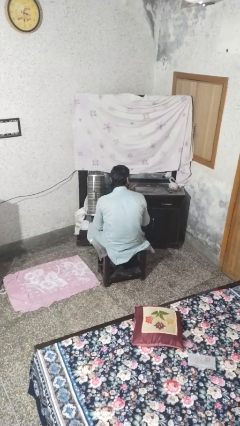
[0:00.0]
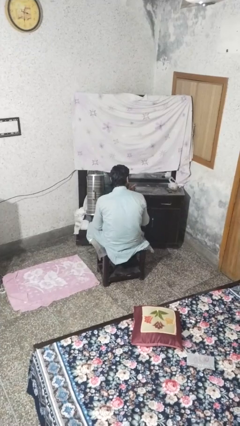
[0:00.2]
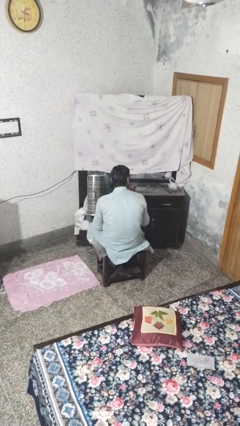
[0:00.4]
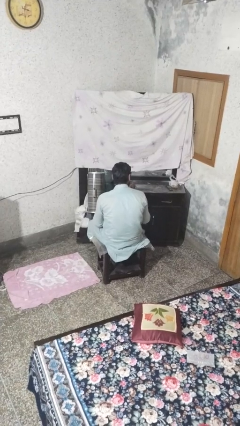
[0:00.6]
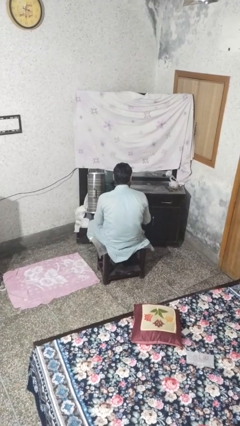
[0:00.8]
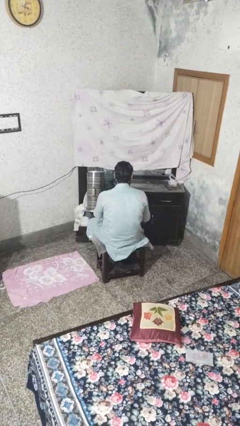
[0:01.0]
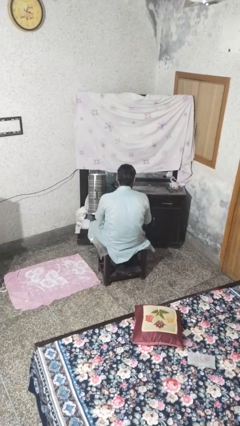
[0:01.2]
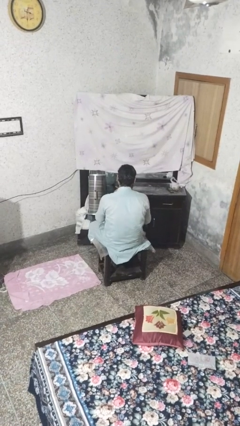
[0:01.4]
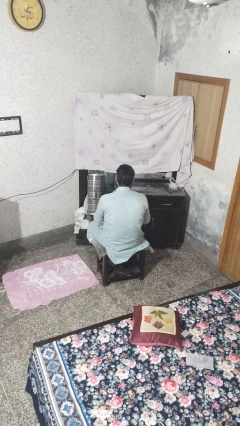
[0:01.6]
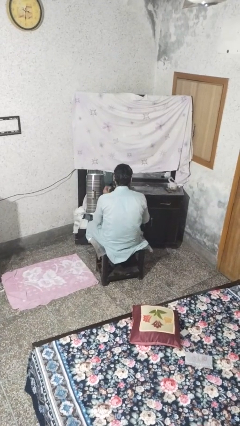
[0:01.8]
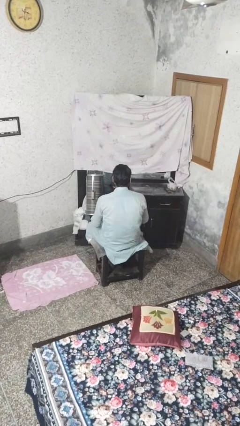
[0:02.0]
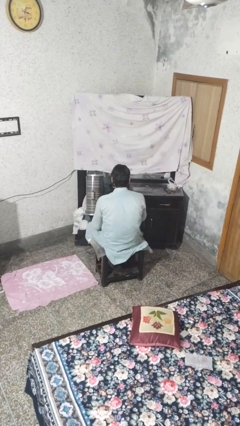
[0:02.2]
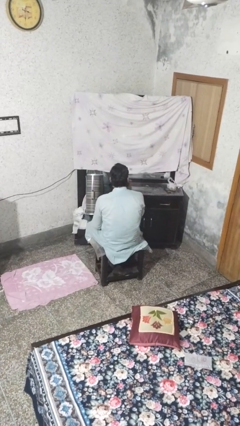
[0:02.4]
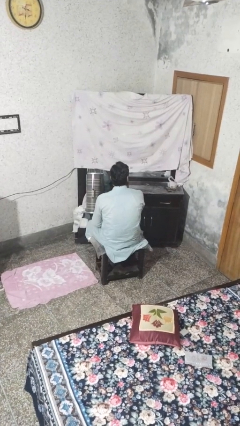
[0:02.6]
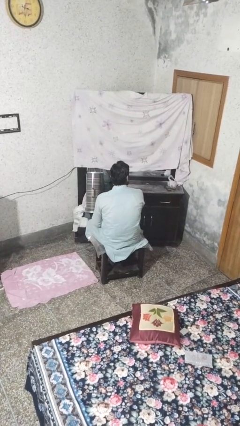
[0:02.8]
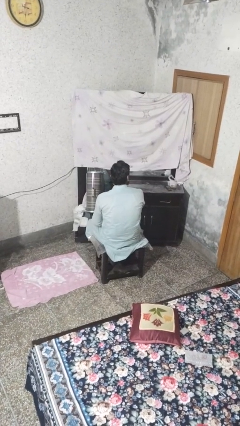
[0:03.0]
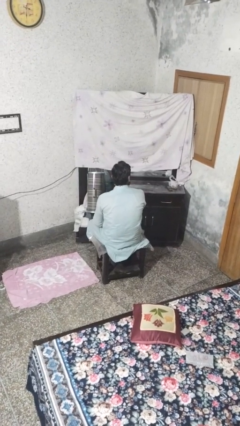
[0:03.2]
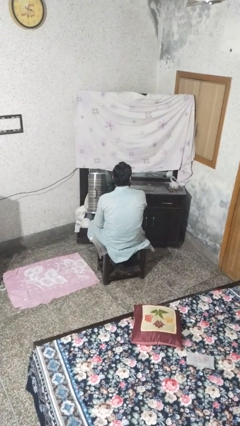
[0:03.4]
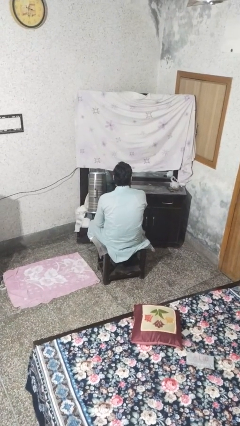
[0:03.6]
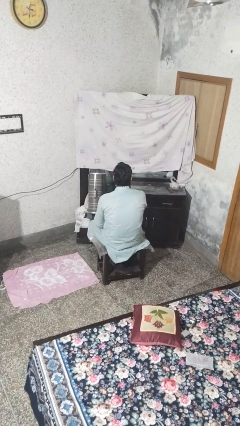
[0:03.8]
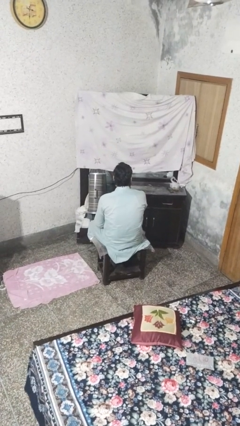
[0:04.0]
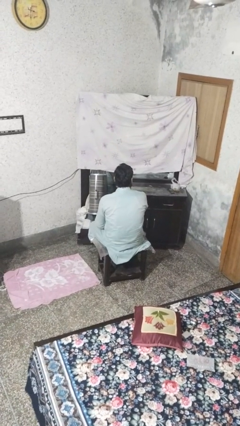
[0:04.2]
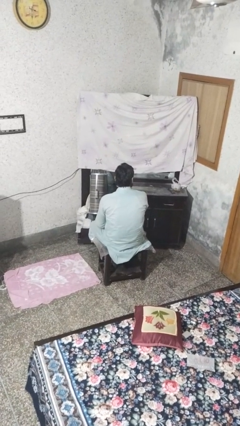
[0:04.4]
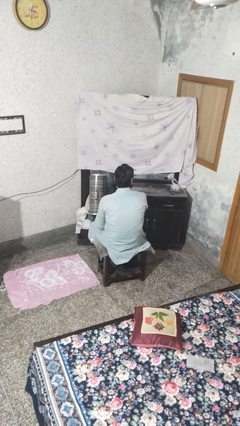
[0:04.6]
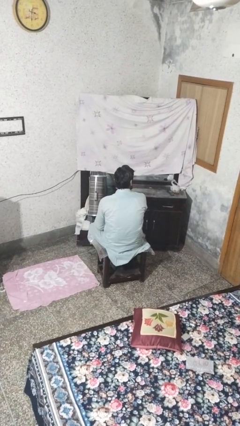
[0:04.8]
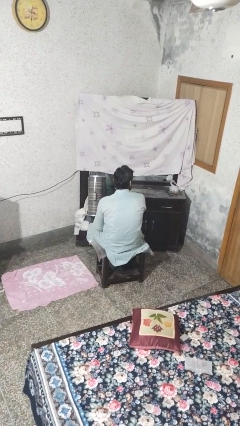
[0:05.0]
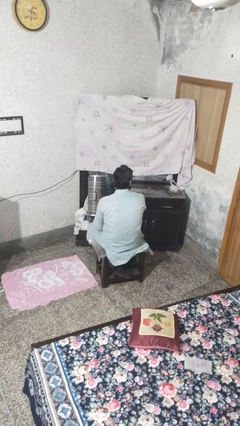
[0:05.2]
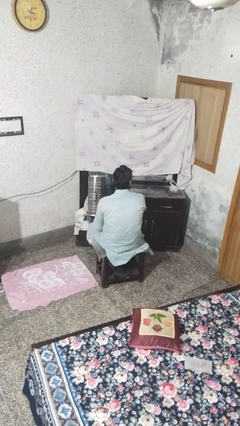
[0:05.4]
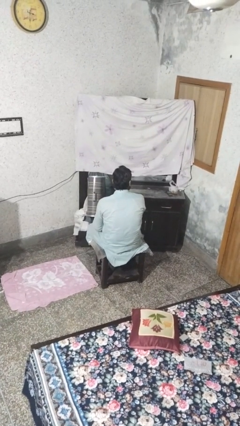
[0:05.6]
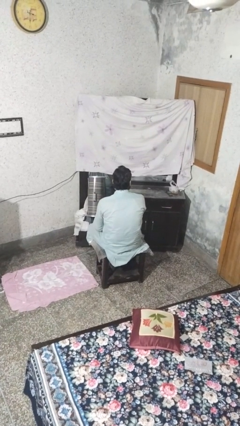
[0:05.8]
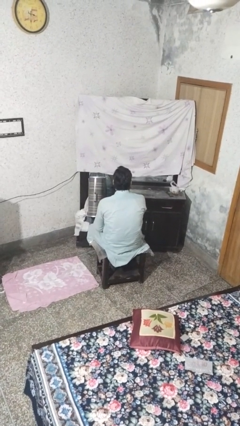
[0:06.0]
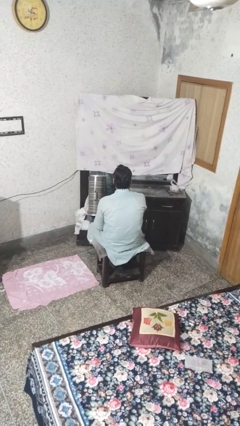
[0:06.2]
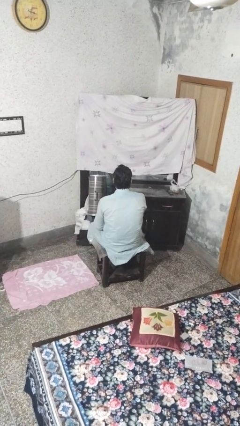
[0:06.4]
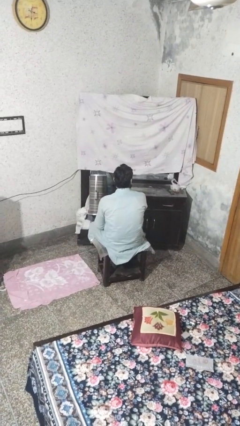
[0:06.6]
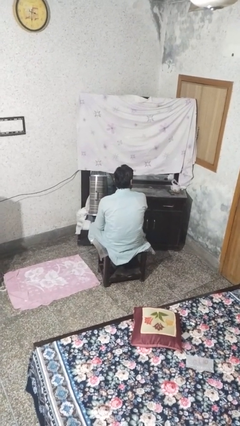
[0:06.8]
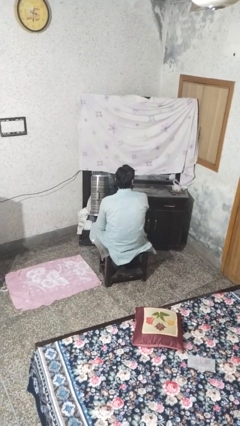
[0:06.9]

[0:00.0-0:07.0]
person applies lip makeup

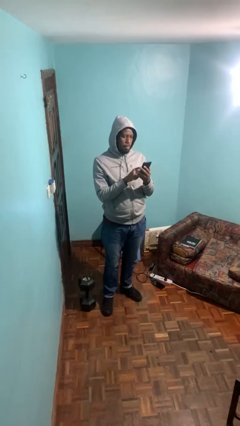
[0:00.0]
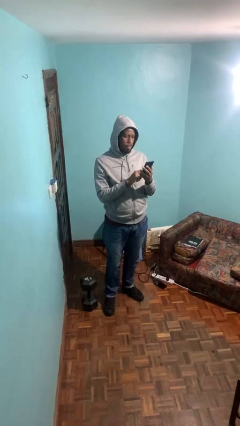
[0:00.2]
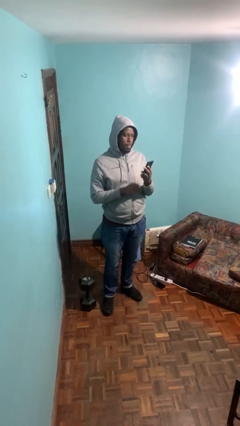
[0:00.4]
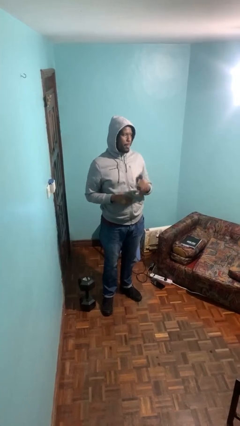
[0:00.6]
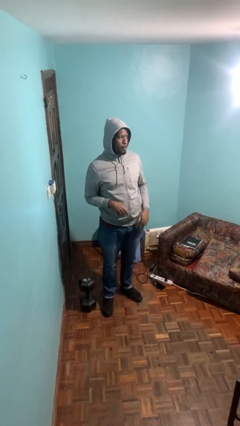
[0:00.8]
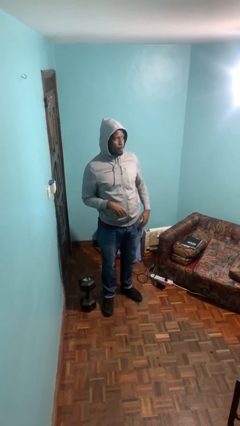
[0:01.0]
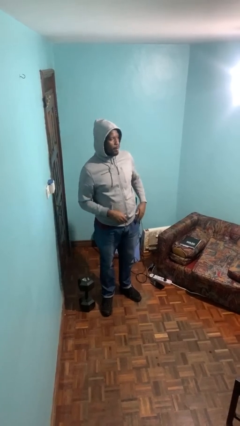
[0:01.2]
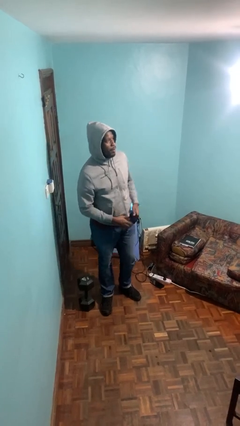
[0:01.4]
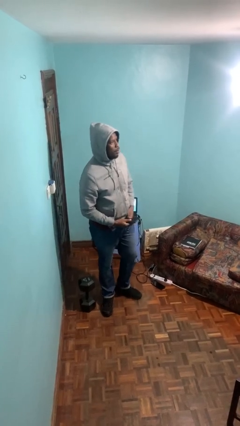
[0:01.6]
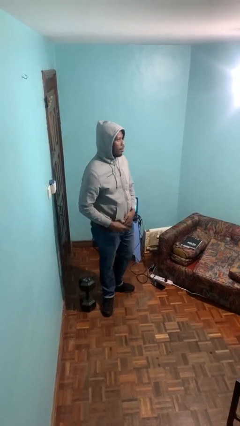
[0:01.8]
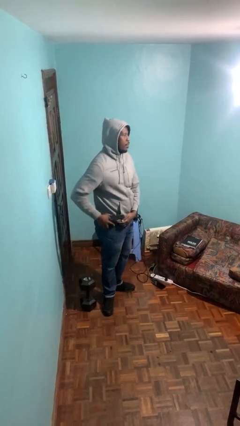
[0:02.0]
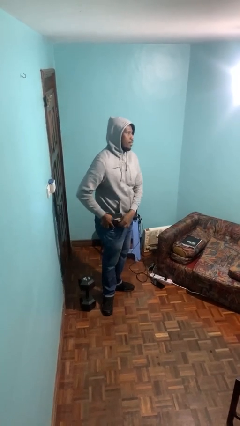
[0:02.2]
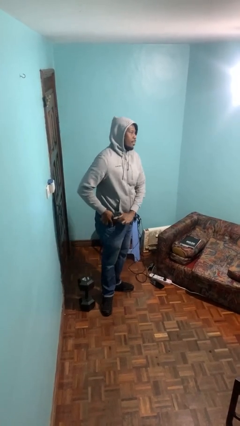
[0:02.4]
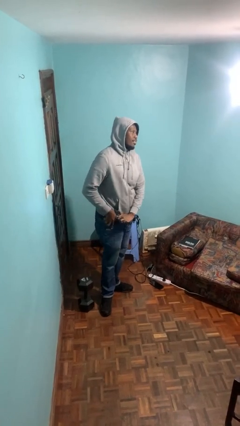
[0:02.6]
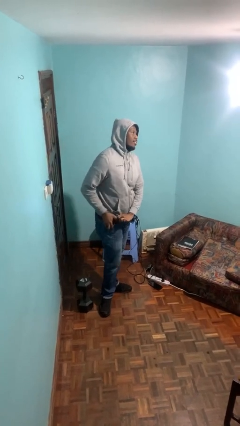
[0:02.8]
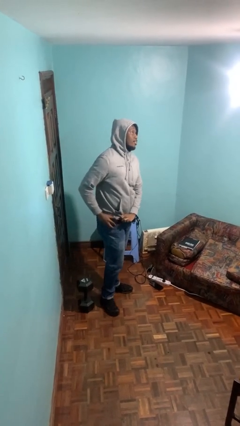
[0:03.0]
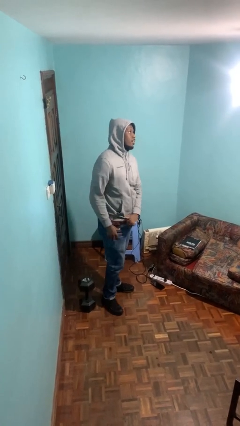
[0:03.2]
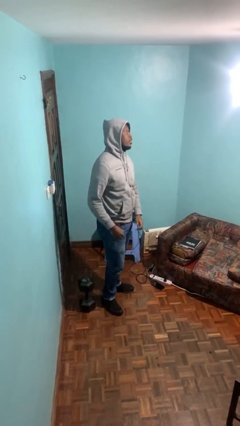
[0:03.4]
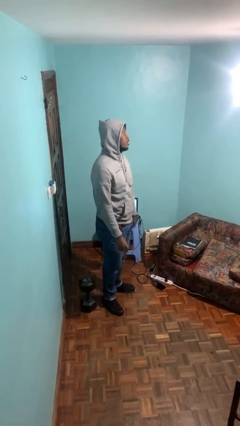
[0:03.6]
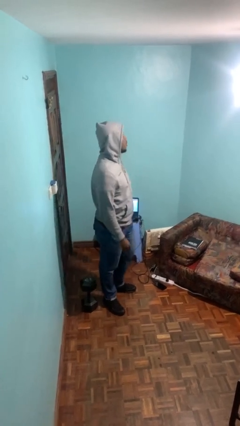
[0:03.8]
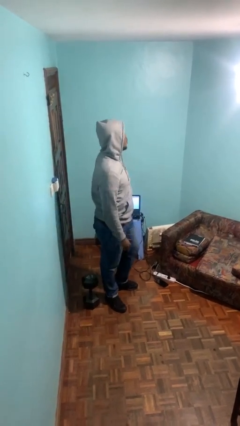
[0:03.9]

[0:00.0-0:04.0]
person puts phone into pocket

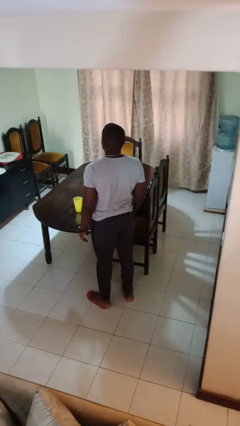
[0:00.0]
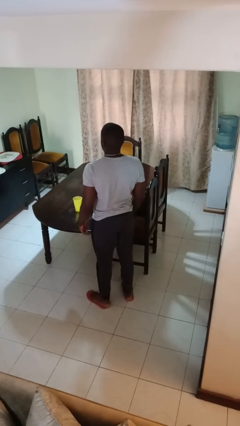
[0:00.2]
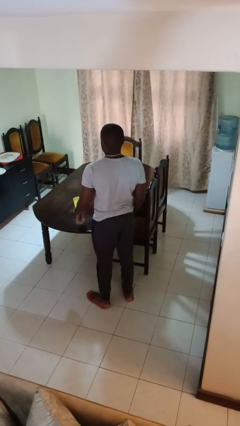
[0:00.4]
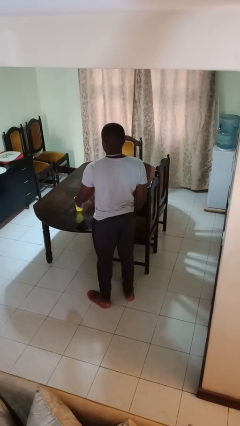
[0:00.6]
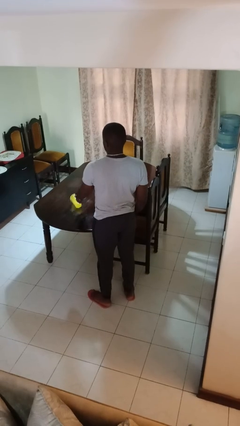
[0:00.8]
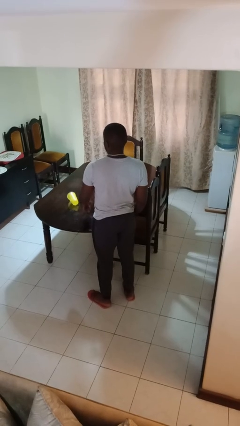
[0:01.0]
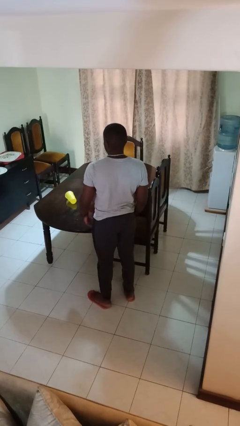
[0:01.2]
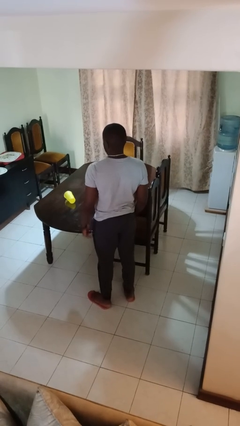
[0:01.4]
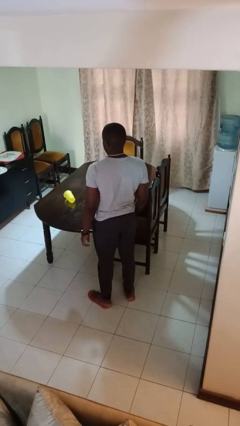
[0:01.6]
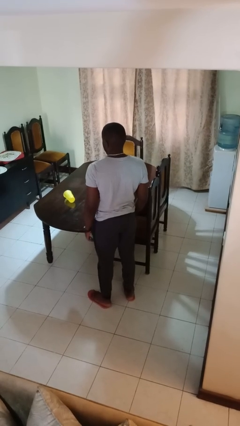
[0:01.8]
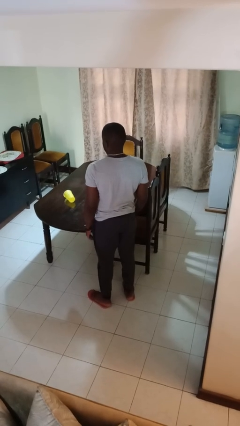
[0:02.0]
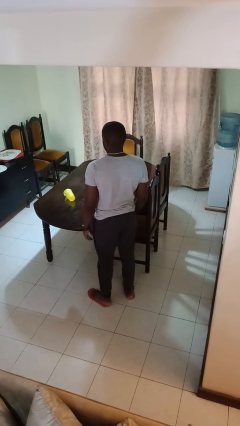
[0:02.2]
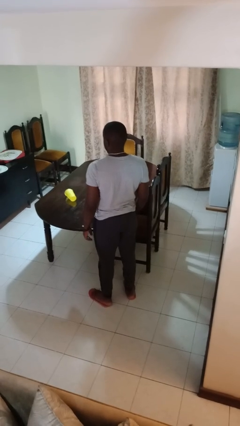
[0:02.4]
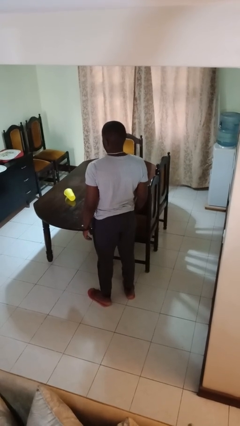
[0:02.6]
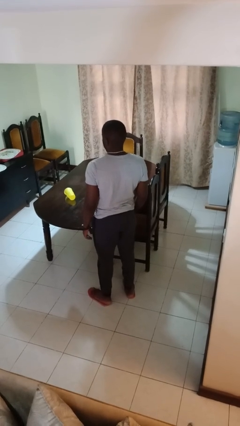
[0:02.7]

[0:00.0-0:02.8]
person knocks over glass

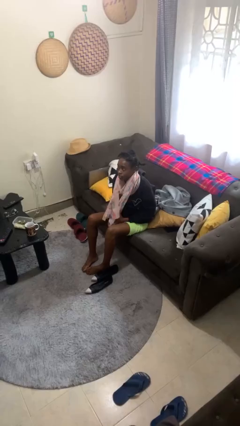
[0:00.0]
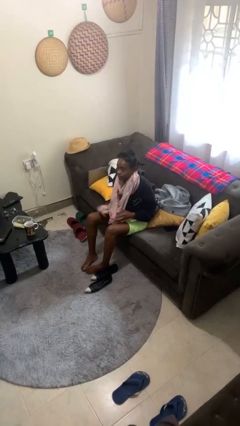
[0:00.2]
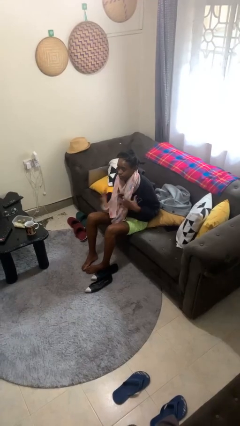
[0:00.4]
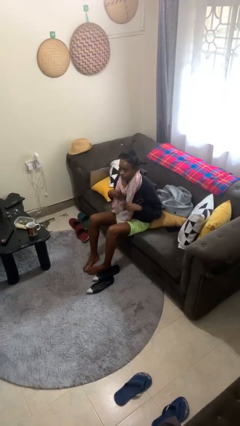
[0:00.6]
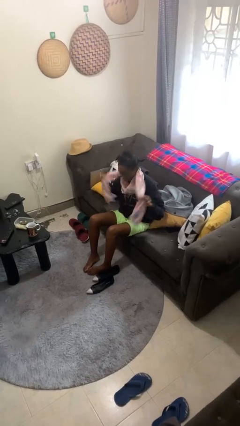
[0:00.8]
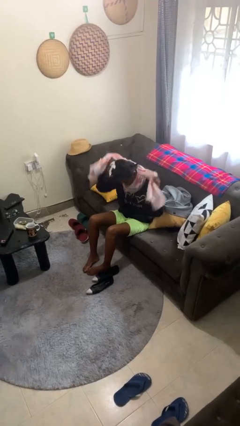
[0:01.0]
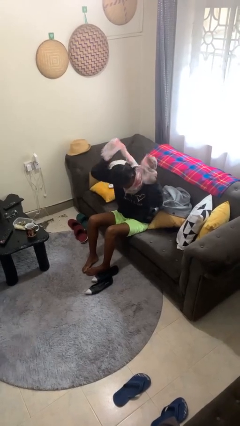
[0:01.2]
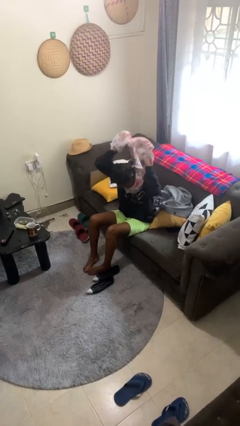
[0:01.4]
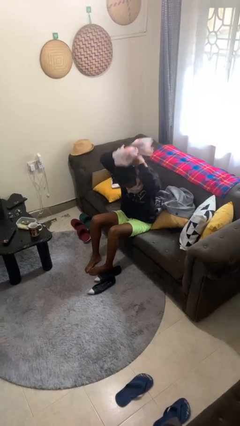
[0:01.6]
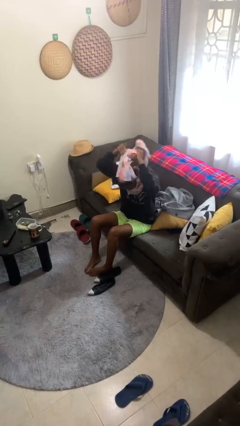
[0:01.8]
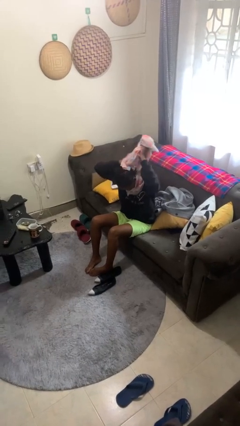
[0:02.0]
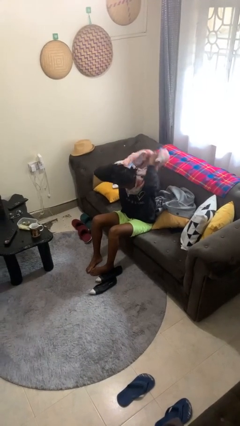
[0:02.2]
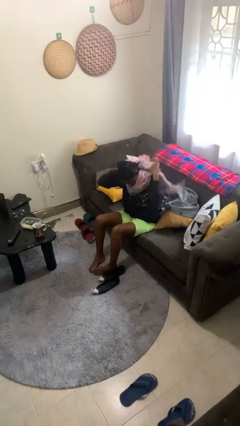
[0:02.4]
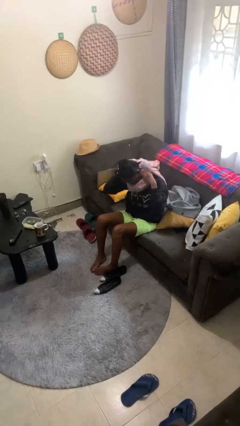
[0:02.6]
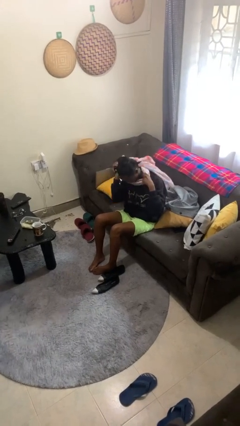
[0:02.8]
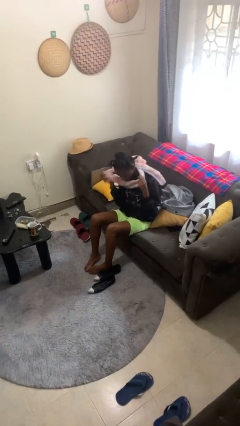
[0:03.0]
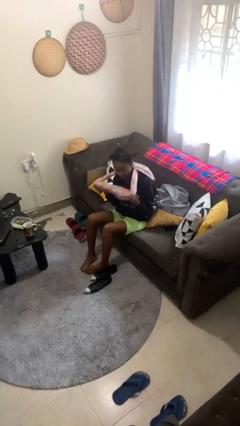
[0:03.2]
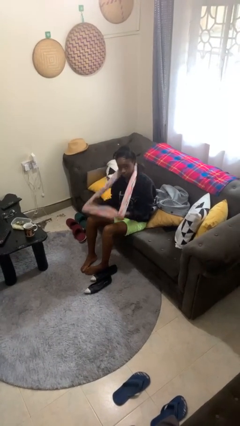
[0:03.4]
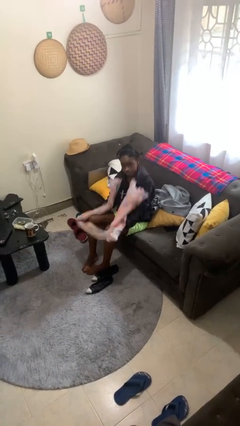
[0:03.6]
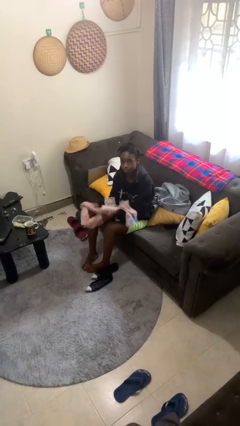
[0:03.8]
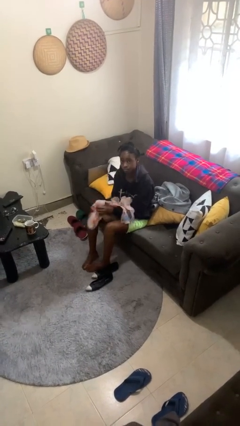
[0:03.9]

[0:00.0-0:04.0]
person takes off scarf
